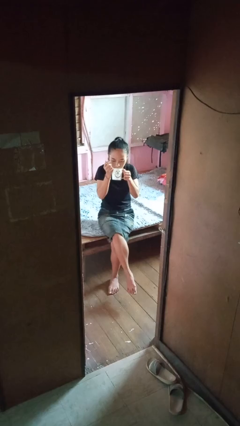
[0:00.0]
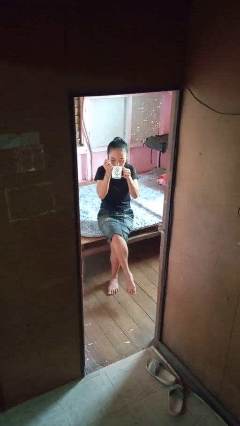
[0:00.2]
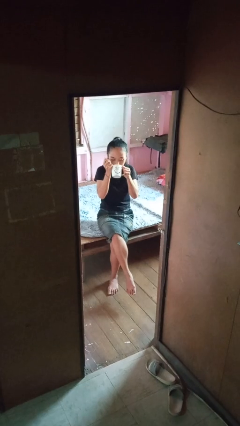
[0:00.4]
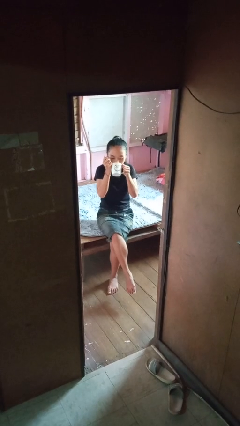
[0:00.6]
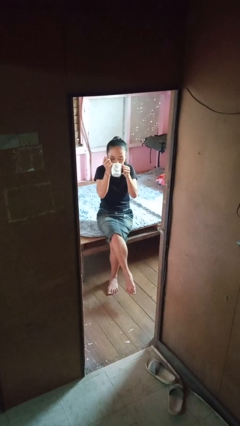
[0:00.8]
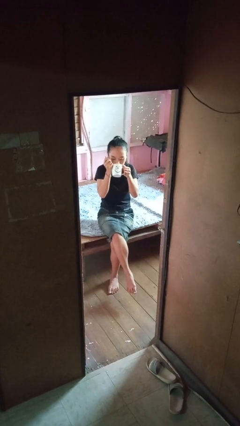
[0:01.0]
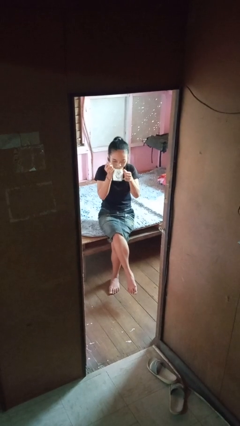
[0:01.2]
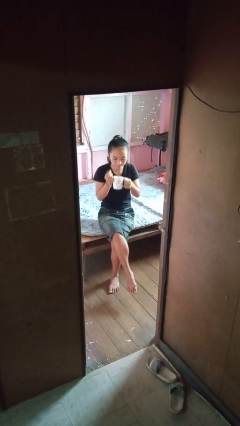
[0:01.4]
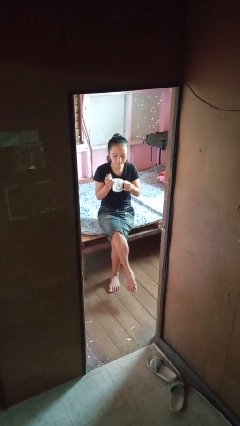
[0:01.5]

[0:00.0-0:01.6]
person drinks from mug

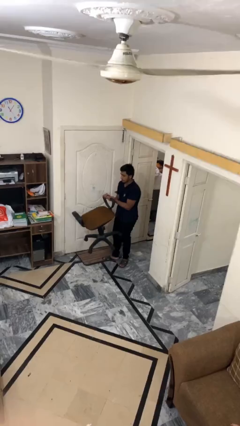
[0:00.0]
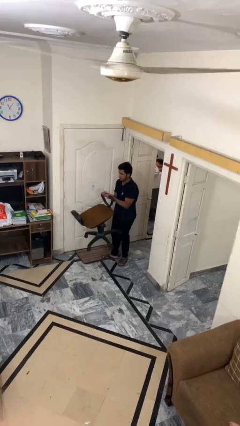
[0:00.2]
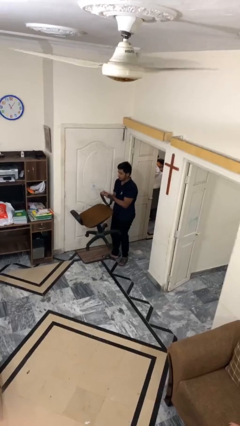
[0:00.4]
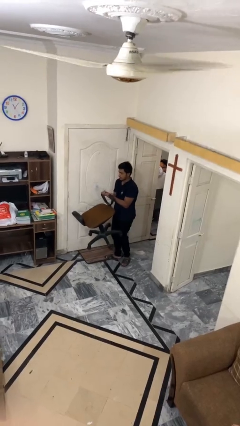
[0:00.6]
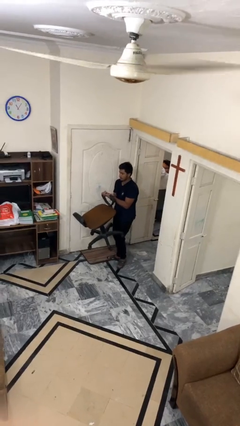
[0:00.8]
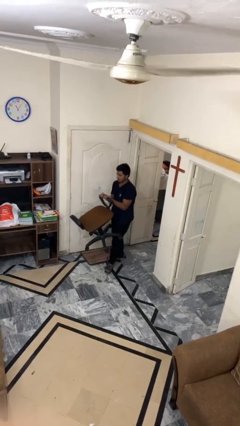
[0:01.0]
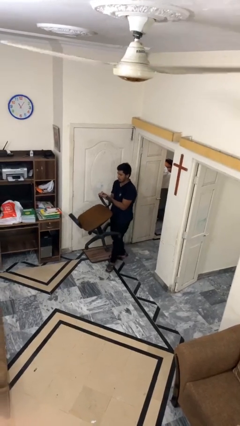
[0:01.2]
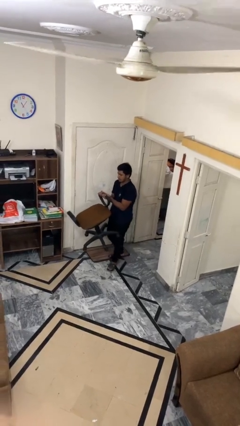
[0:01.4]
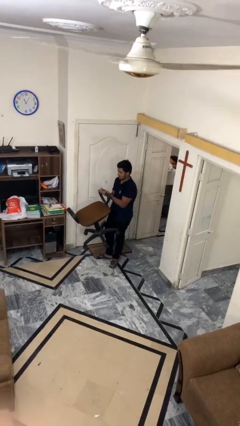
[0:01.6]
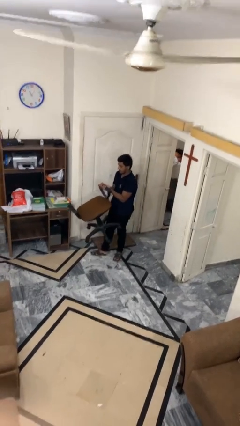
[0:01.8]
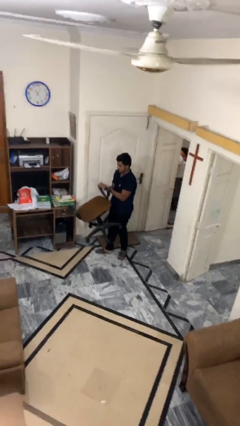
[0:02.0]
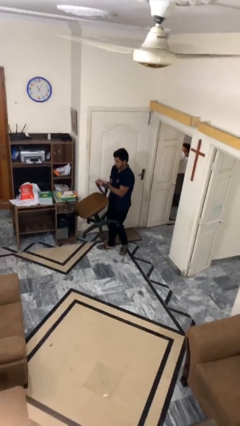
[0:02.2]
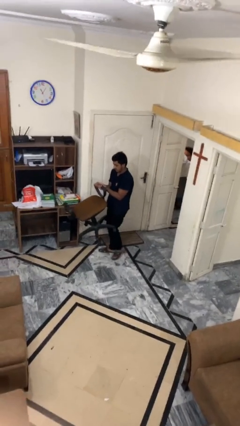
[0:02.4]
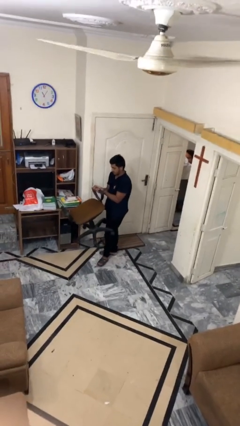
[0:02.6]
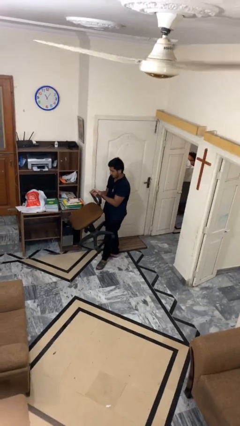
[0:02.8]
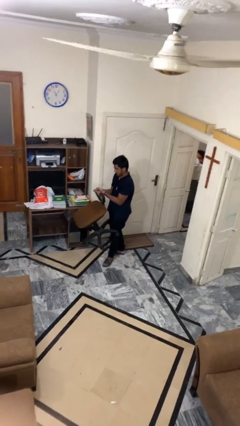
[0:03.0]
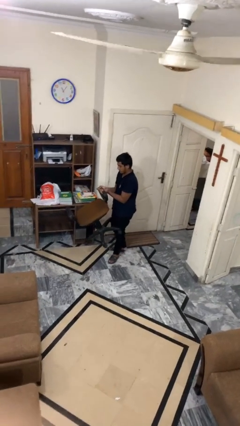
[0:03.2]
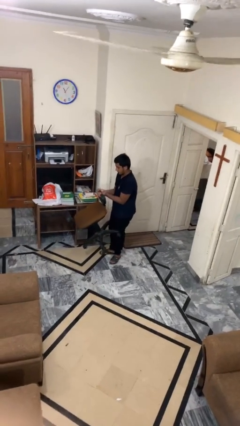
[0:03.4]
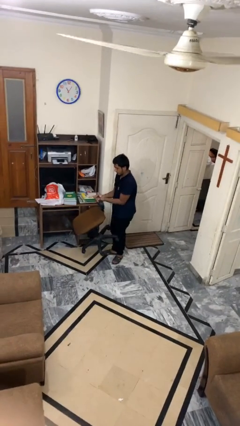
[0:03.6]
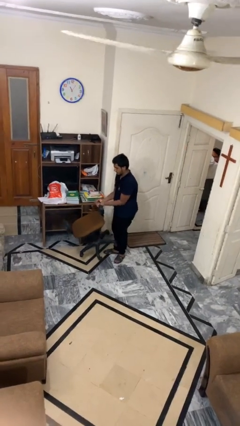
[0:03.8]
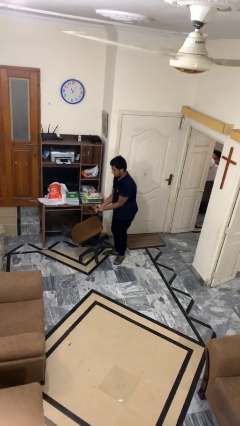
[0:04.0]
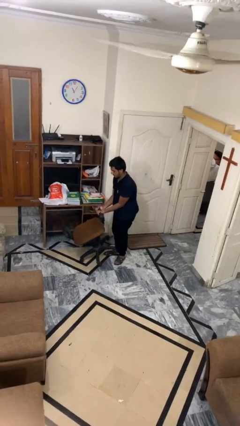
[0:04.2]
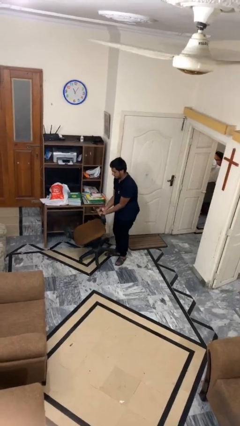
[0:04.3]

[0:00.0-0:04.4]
person carries heavy object

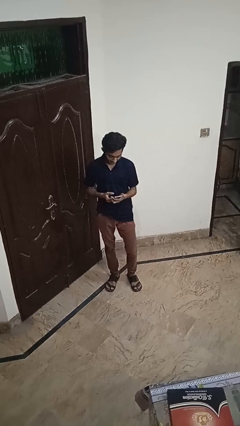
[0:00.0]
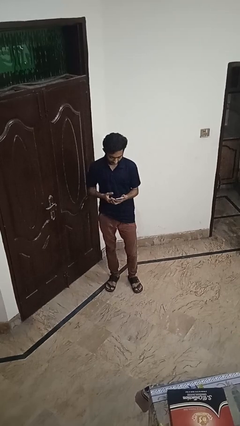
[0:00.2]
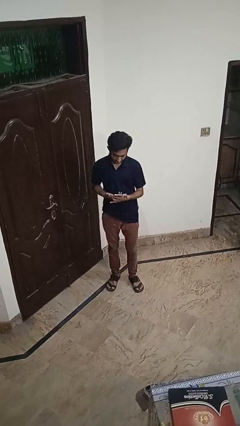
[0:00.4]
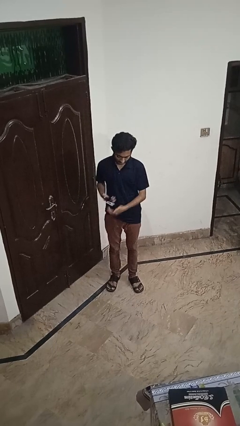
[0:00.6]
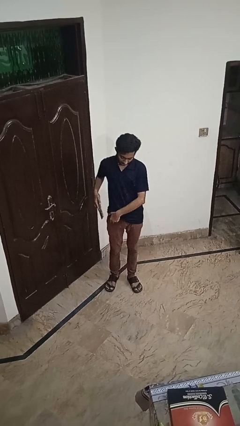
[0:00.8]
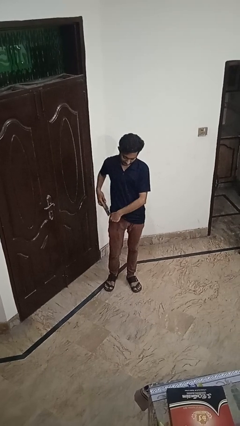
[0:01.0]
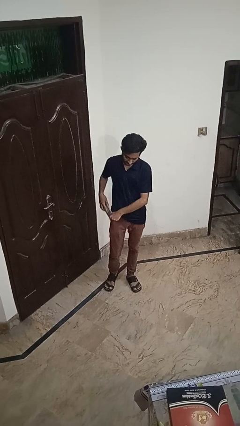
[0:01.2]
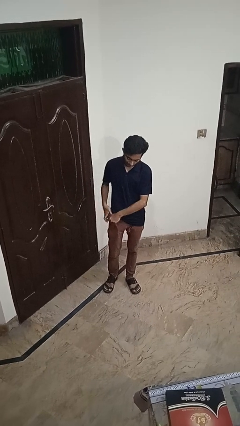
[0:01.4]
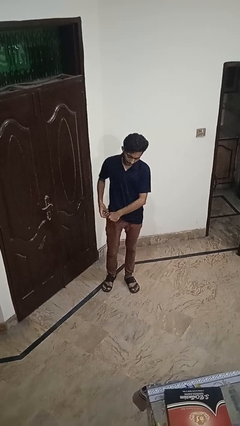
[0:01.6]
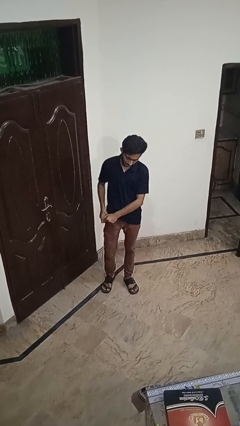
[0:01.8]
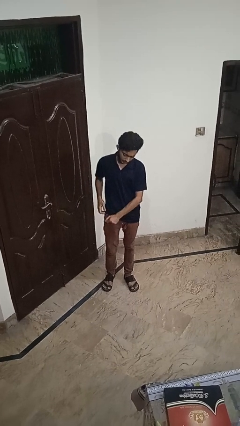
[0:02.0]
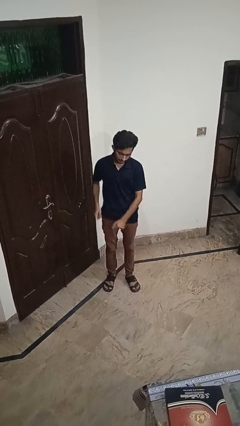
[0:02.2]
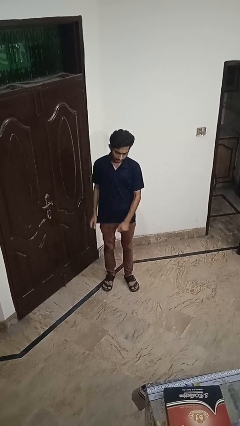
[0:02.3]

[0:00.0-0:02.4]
person puts phone into pocket

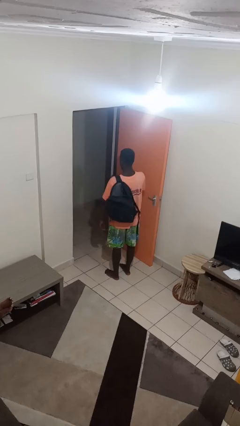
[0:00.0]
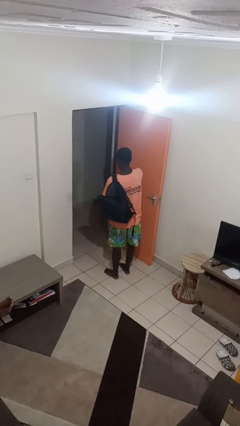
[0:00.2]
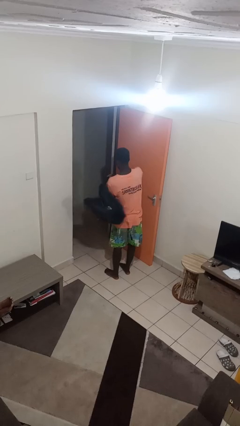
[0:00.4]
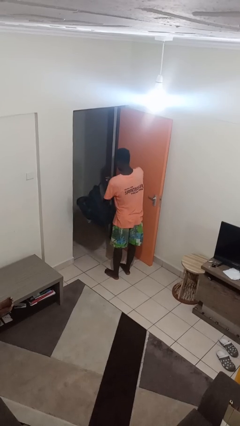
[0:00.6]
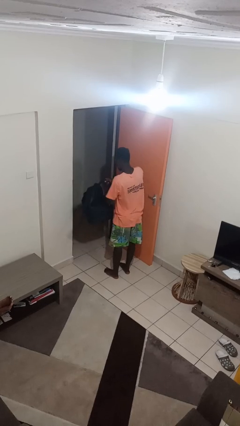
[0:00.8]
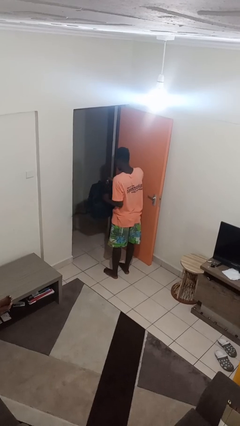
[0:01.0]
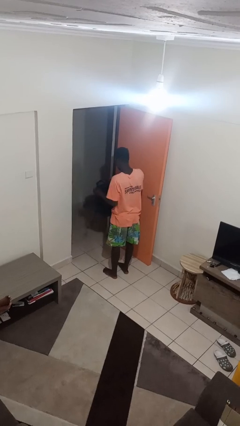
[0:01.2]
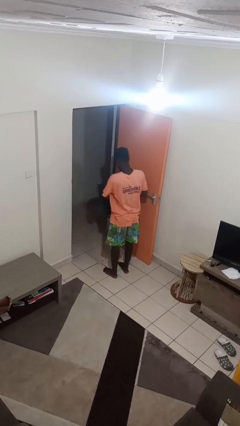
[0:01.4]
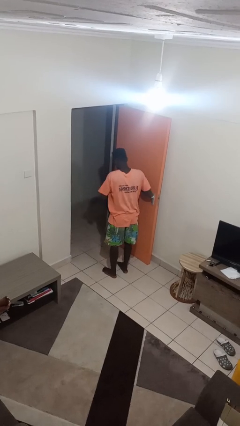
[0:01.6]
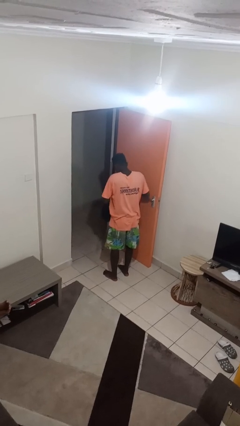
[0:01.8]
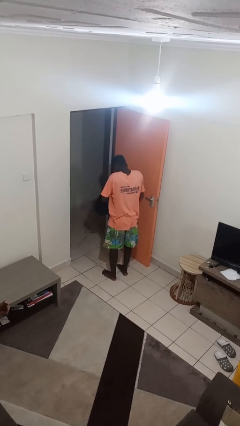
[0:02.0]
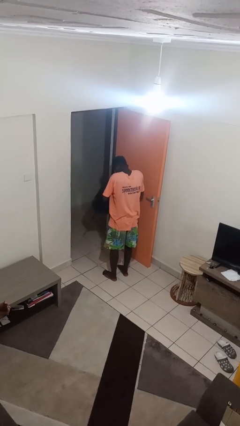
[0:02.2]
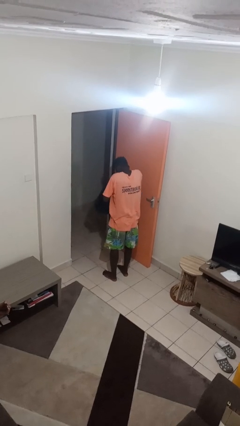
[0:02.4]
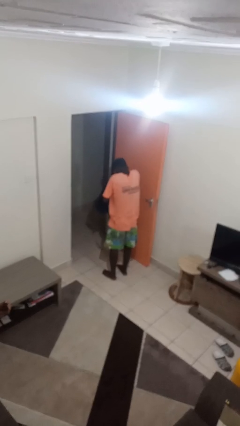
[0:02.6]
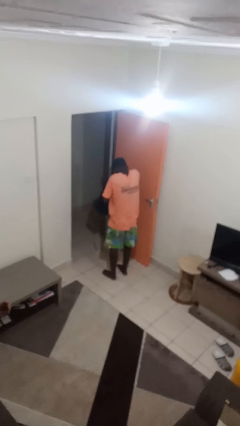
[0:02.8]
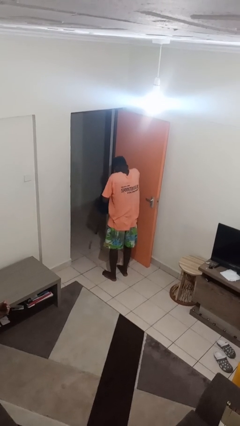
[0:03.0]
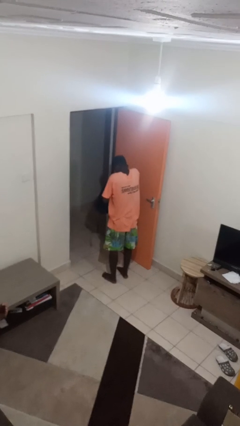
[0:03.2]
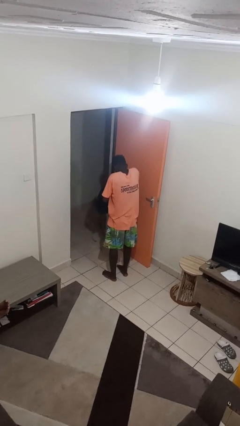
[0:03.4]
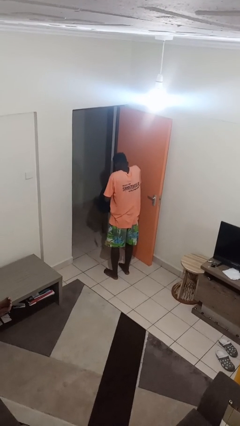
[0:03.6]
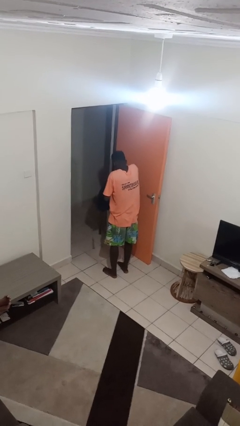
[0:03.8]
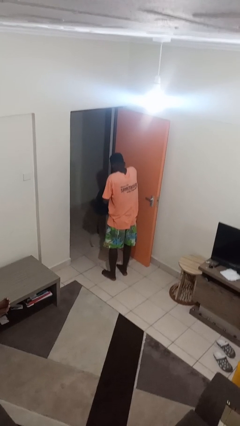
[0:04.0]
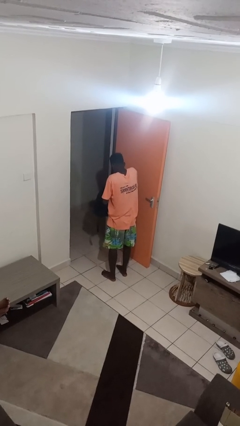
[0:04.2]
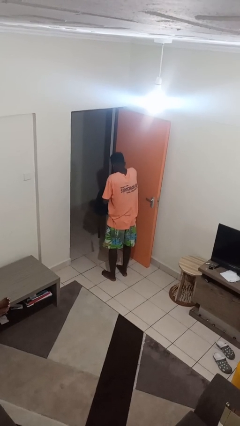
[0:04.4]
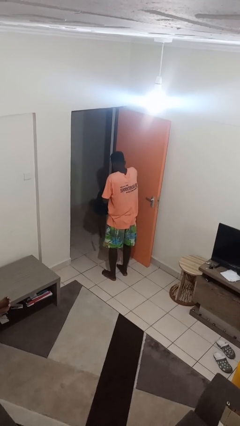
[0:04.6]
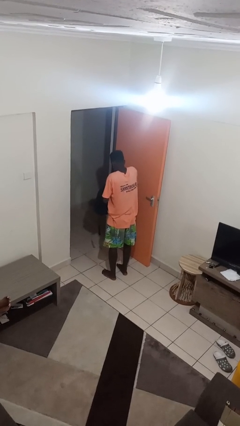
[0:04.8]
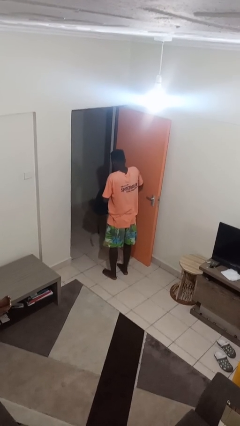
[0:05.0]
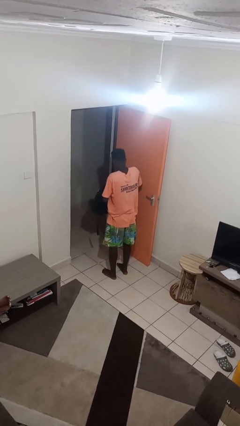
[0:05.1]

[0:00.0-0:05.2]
person searches in backpack

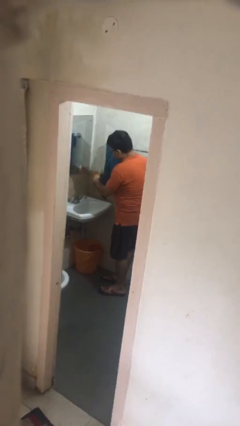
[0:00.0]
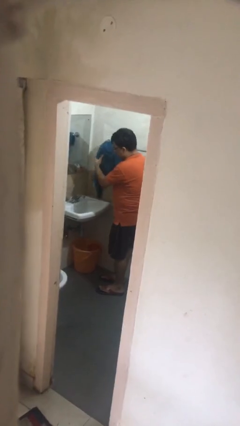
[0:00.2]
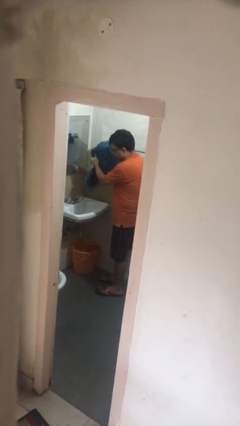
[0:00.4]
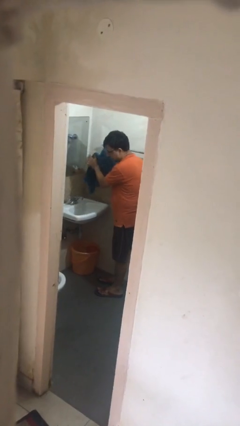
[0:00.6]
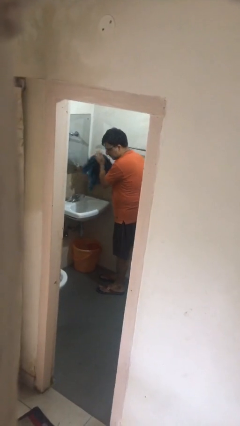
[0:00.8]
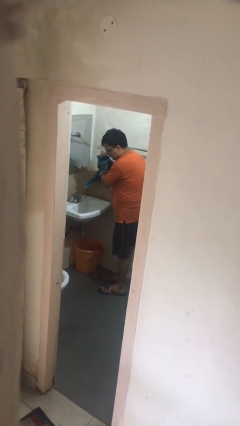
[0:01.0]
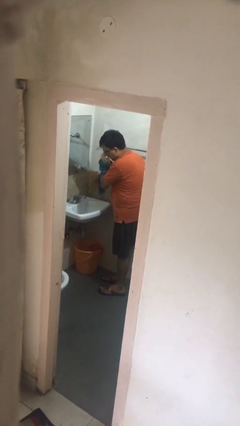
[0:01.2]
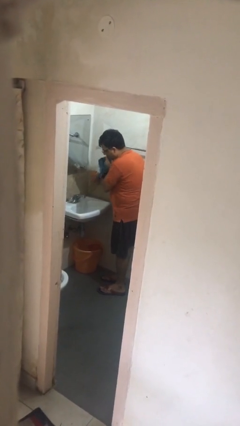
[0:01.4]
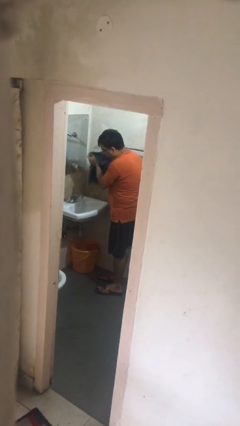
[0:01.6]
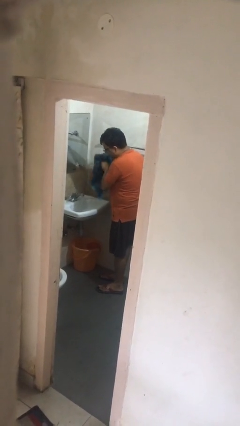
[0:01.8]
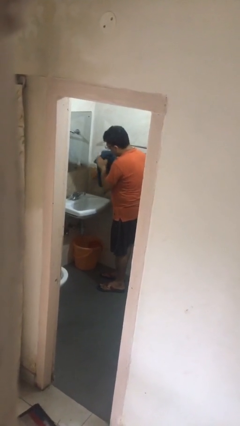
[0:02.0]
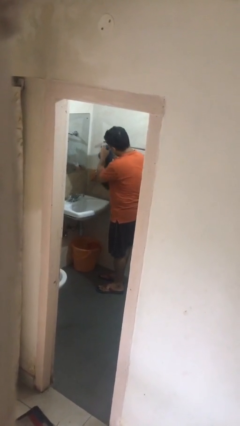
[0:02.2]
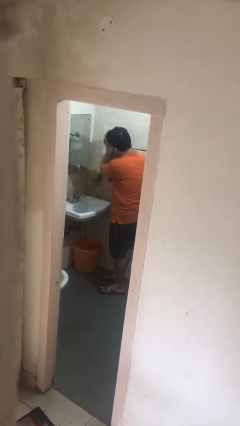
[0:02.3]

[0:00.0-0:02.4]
person dries hands with towel

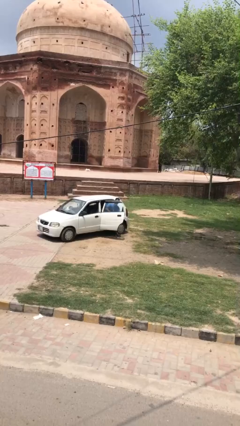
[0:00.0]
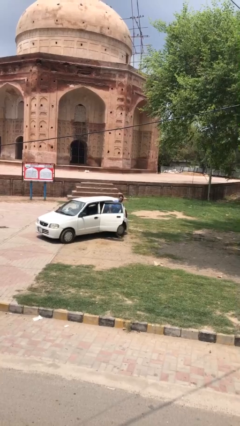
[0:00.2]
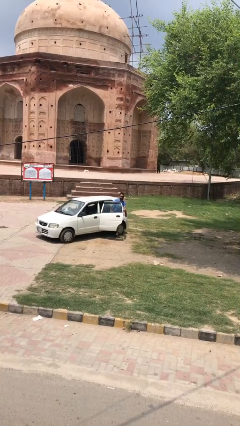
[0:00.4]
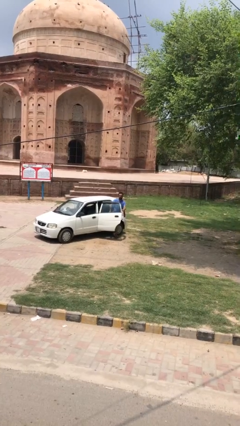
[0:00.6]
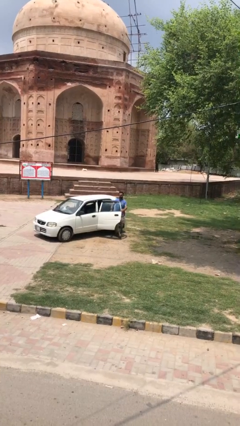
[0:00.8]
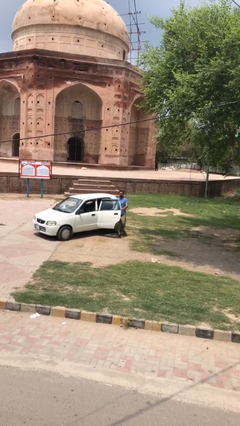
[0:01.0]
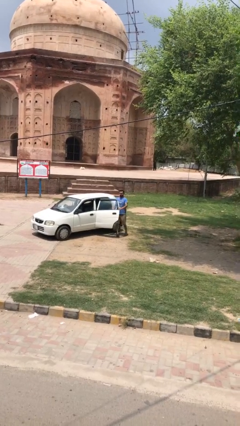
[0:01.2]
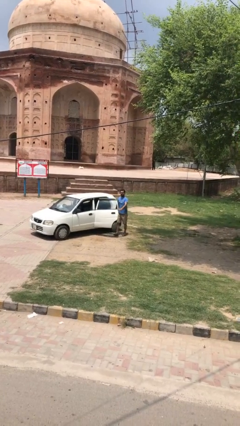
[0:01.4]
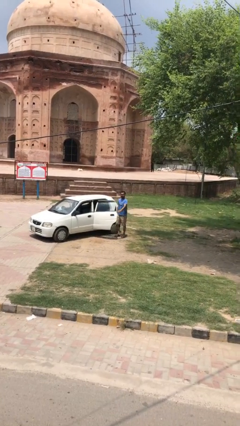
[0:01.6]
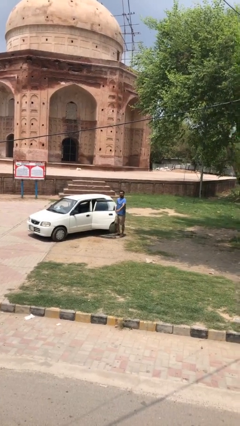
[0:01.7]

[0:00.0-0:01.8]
person exits car
